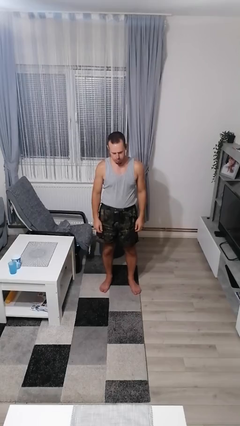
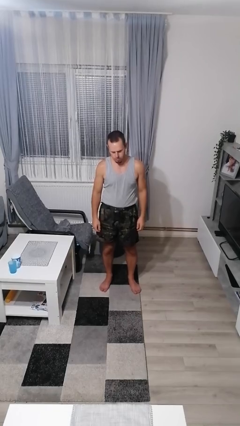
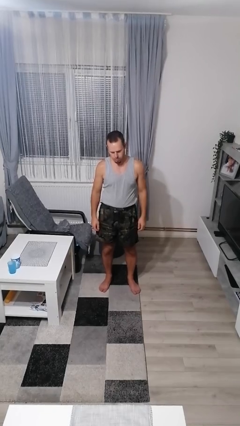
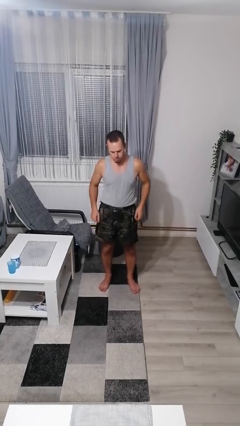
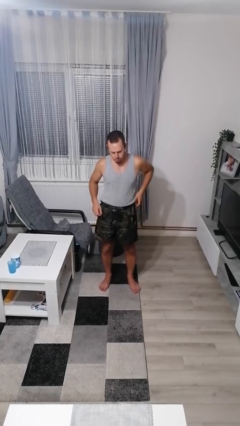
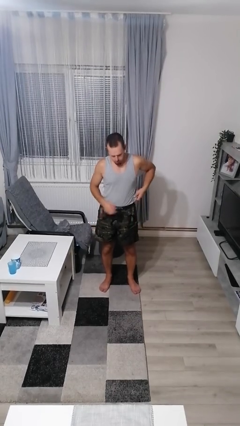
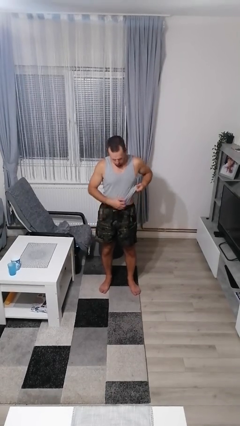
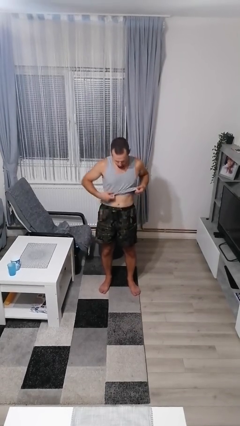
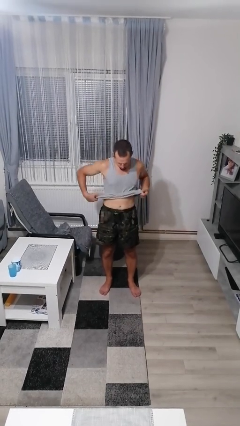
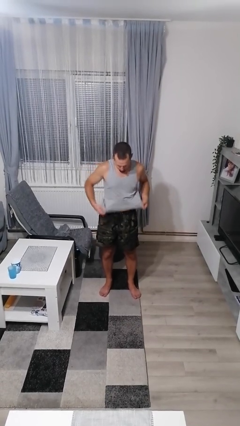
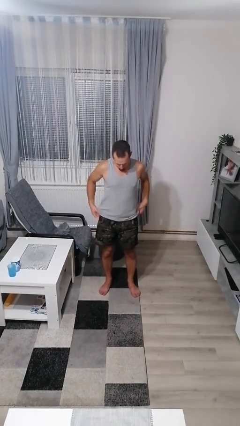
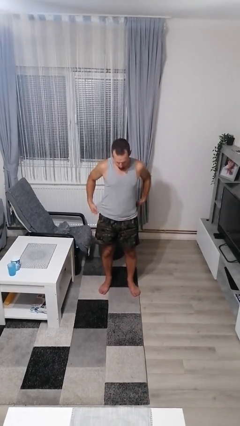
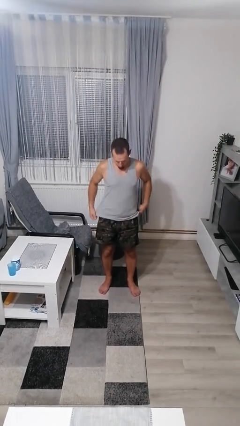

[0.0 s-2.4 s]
person untucks shirt

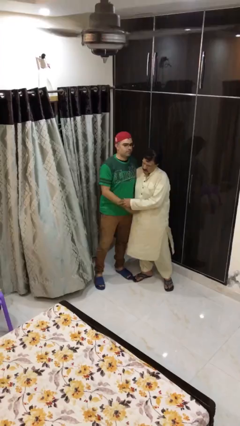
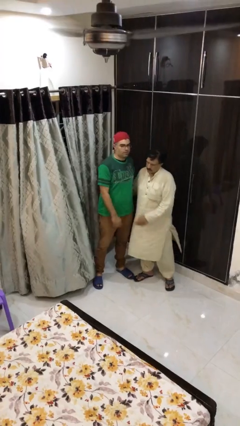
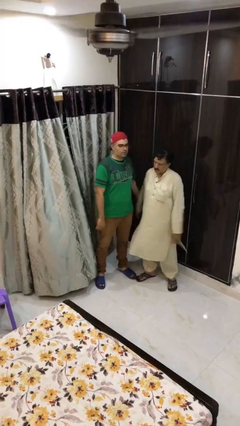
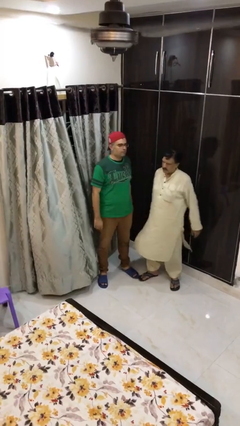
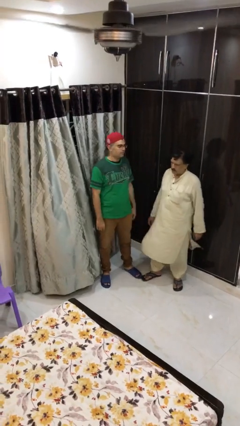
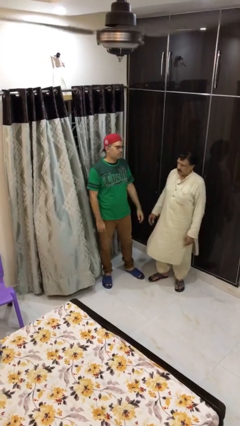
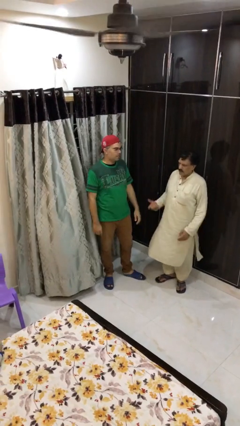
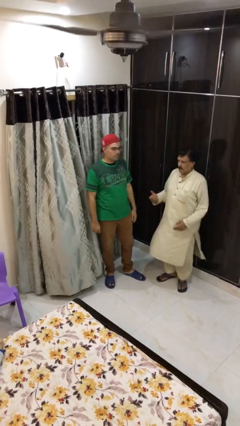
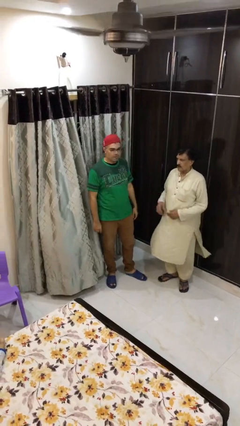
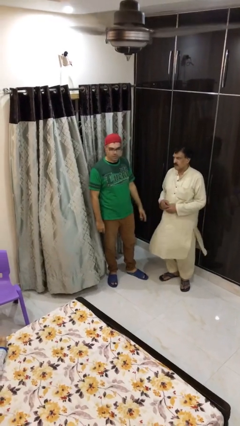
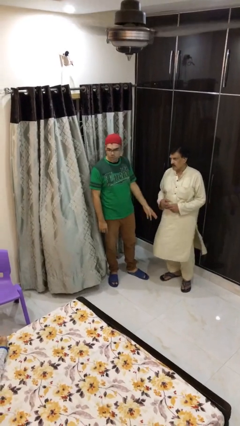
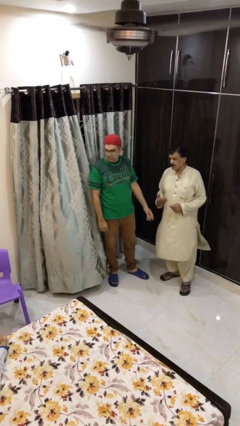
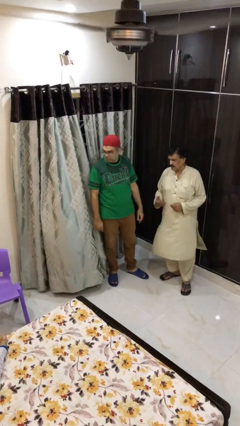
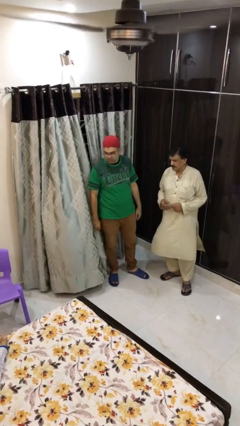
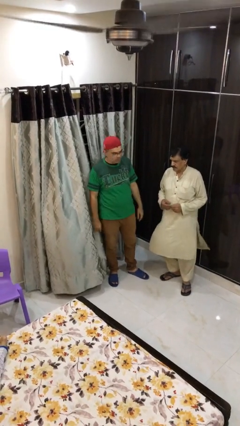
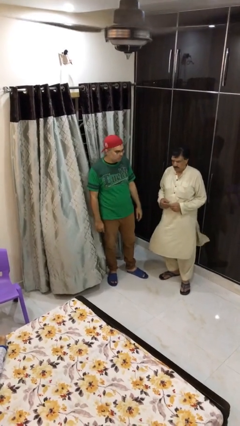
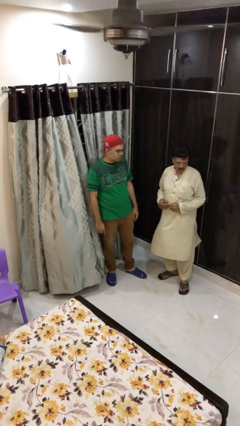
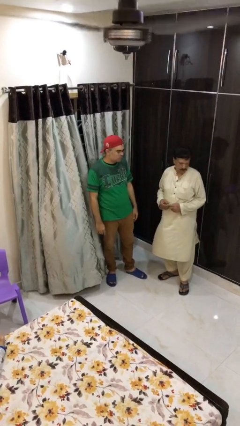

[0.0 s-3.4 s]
person talks to person

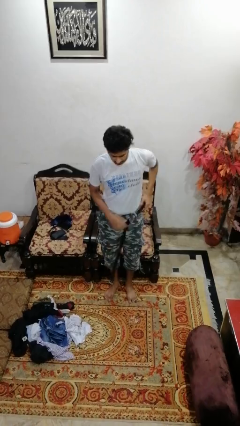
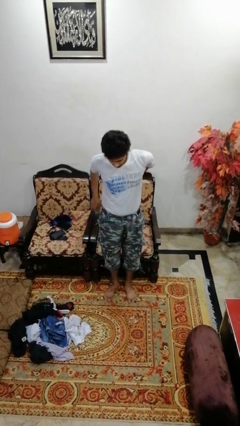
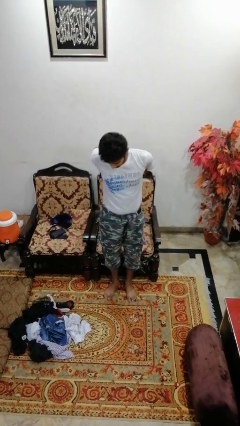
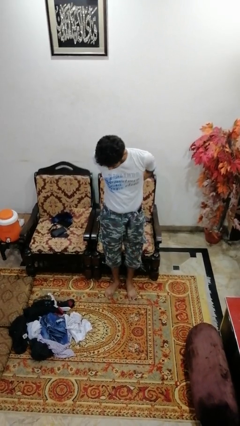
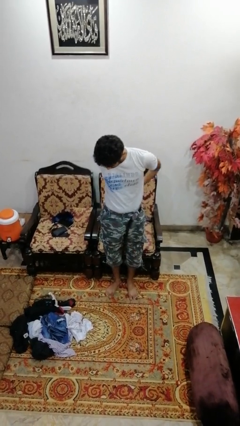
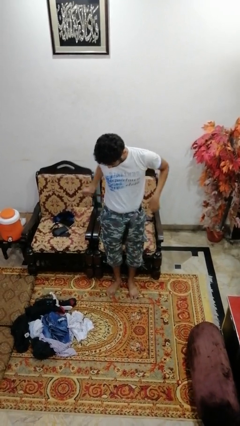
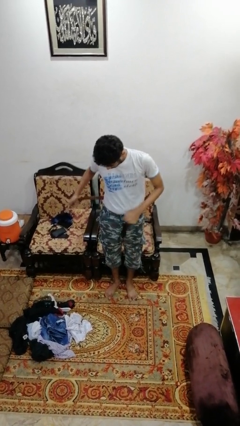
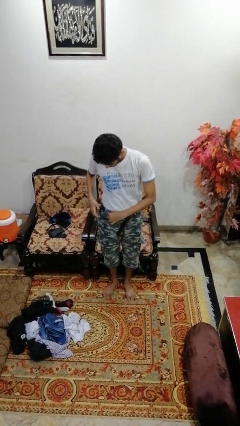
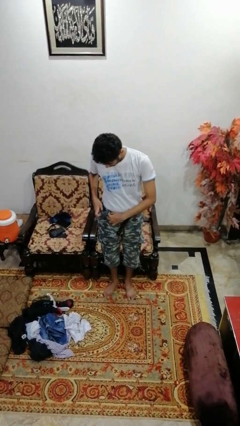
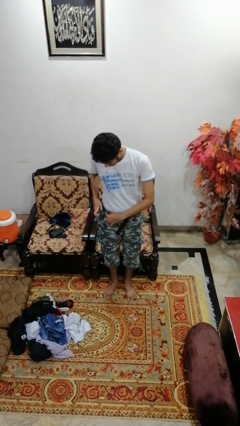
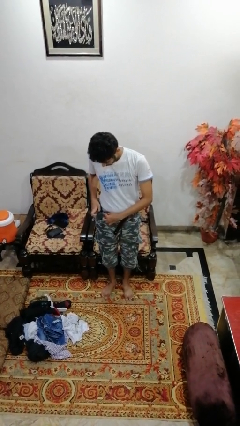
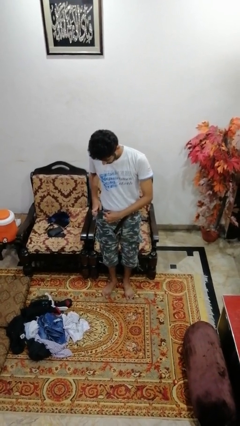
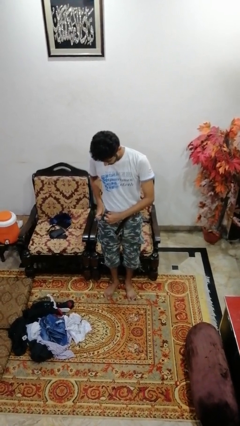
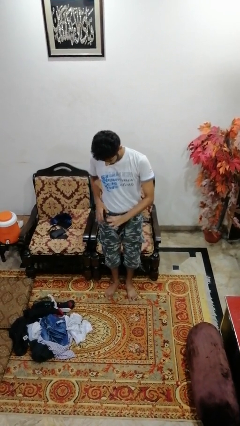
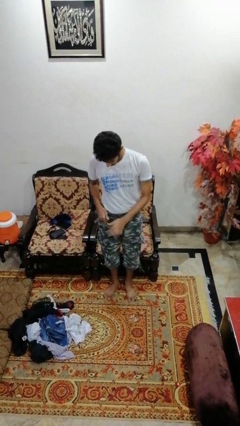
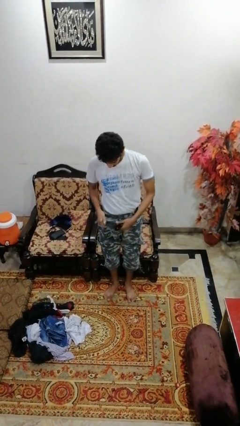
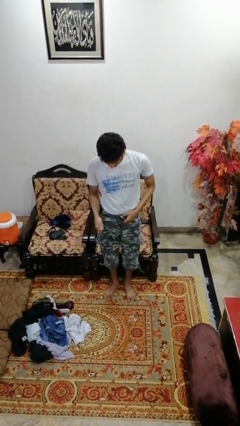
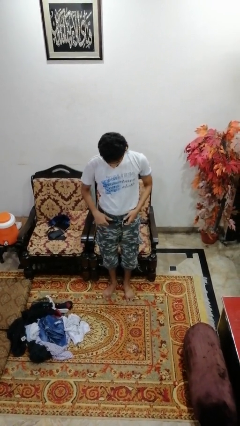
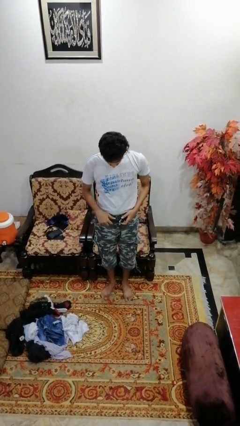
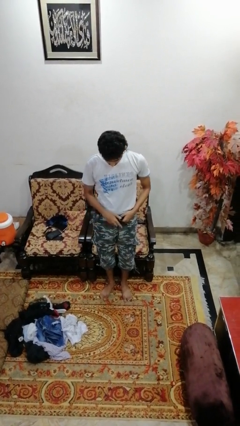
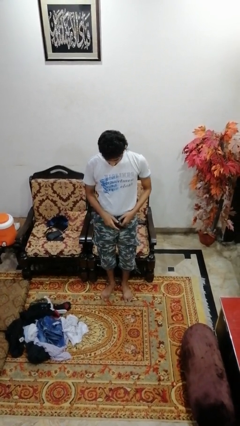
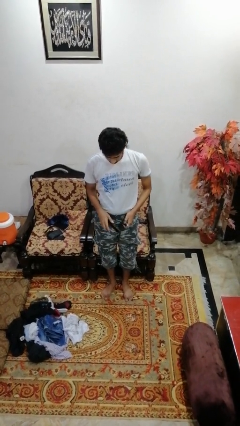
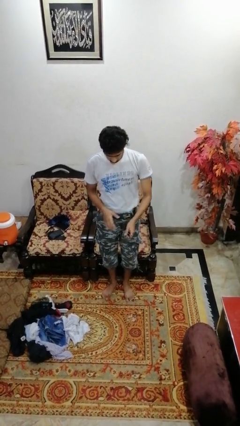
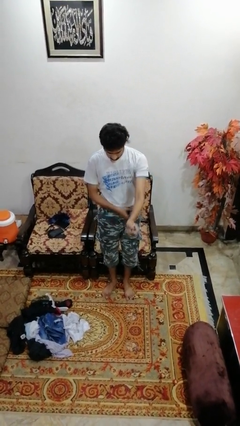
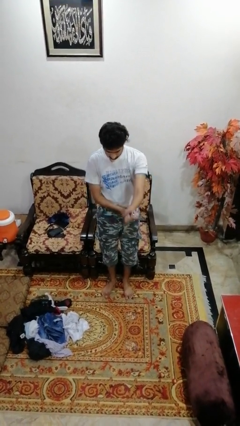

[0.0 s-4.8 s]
person puts on belt

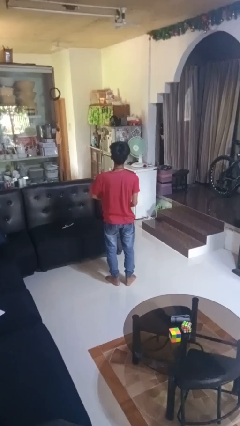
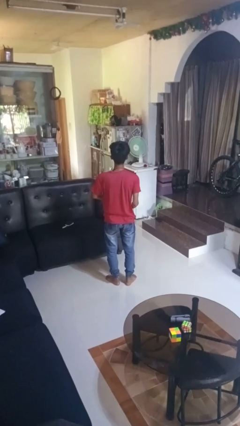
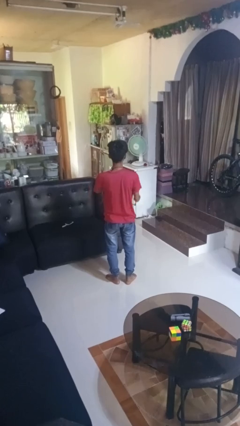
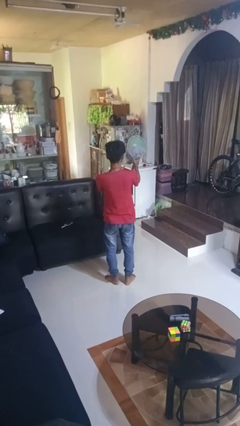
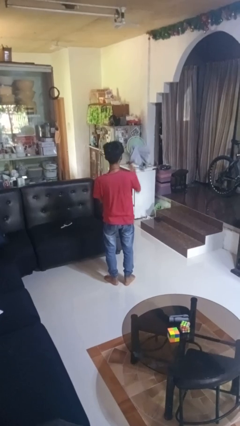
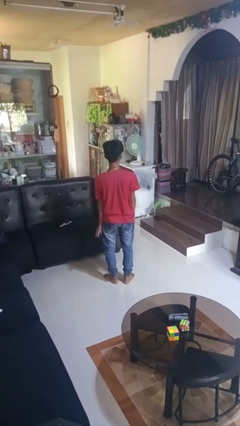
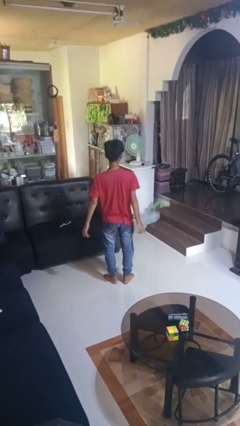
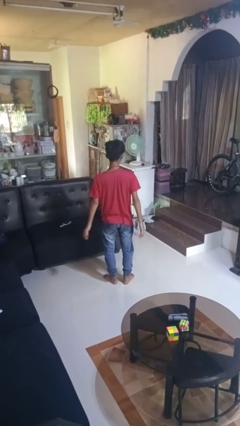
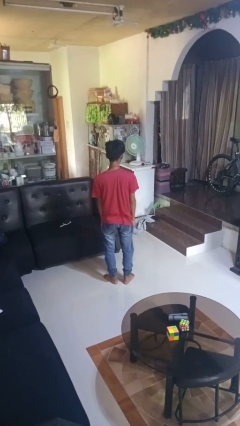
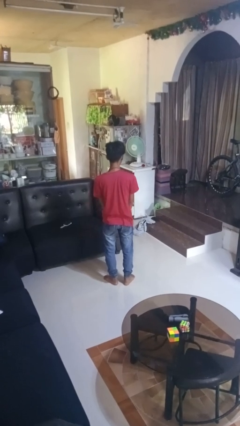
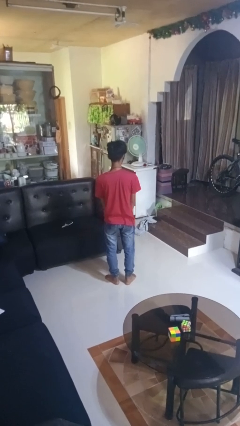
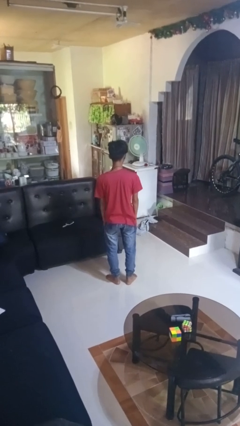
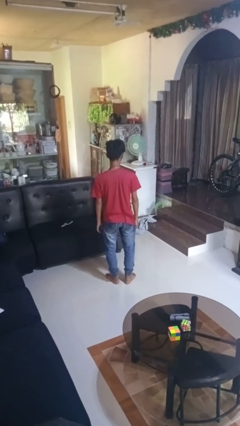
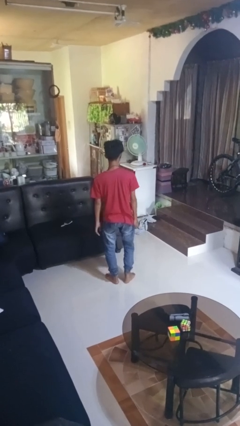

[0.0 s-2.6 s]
person throws object into air

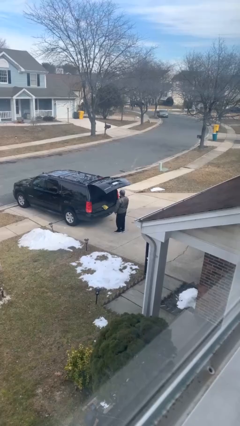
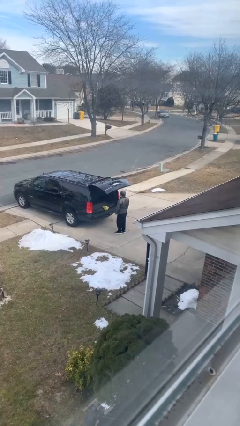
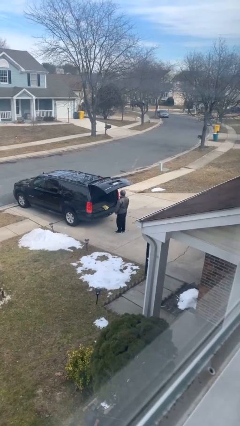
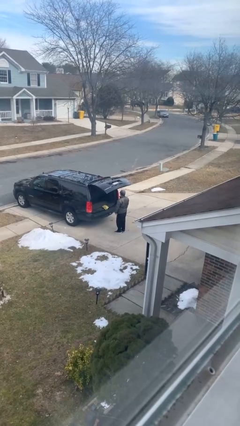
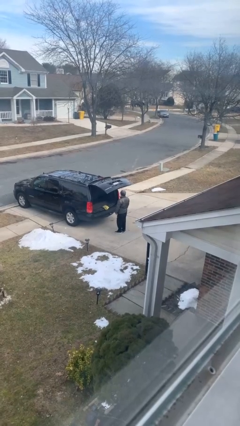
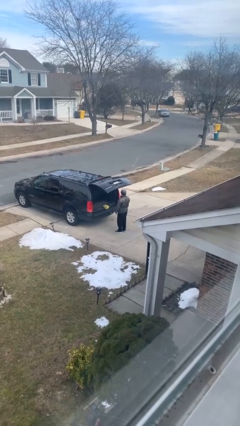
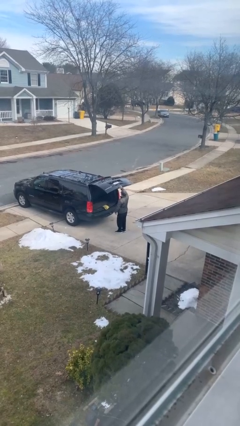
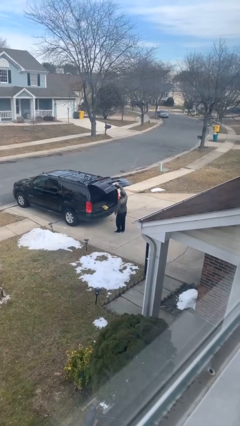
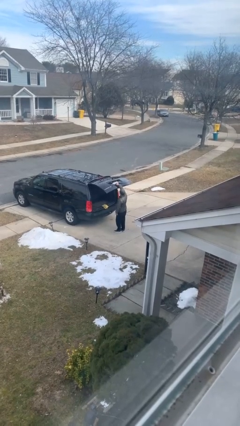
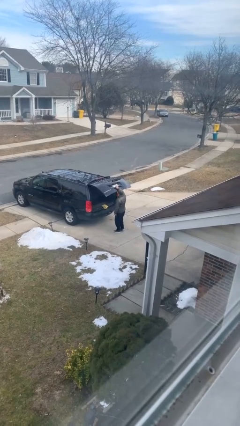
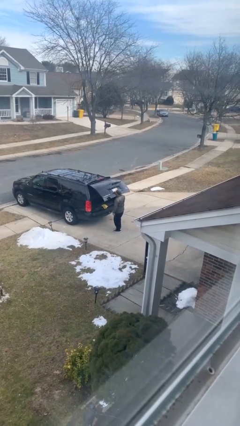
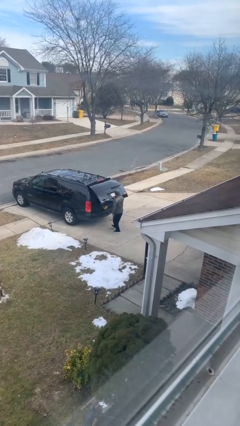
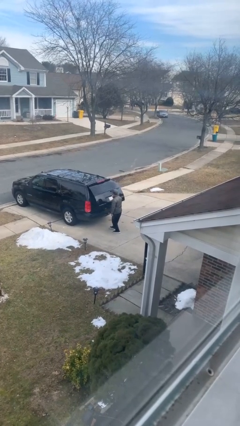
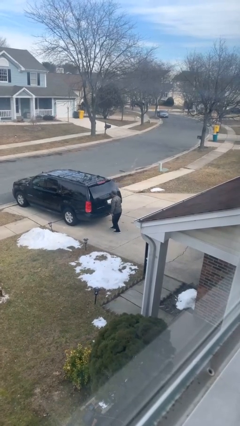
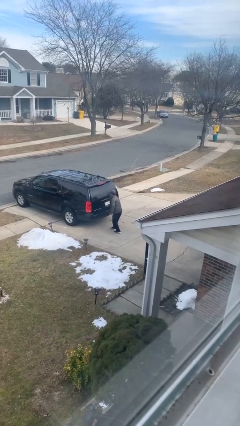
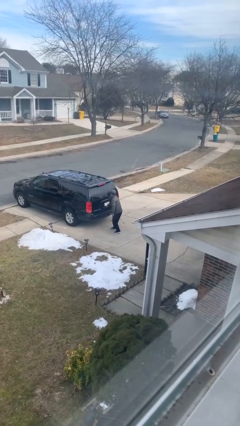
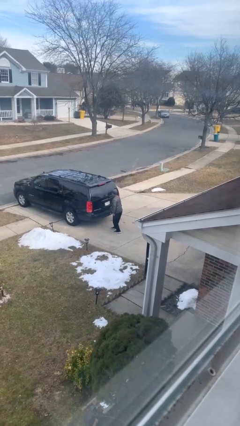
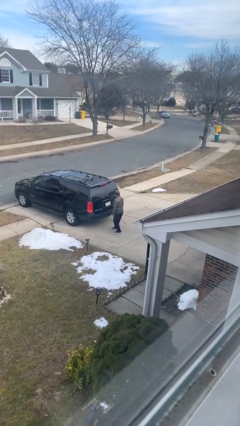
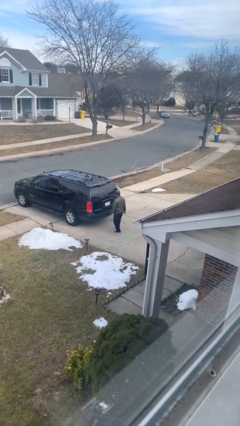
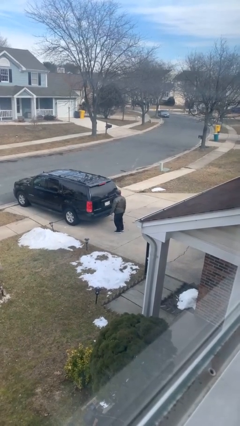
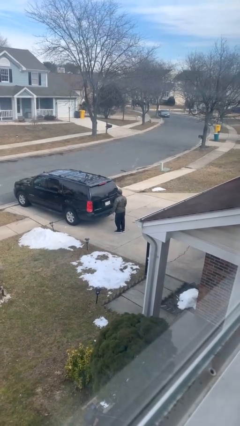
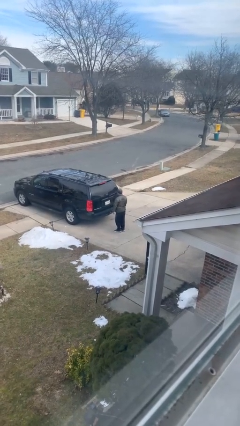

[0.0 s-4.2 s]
person closes car trunk
